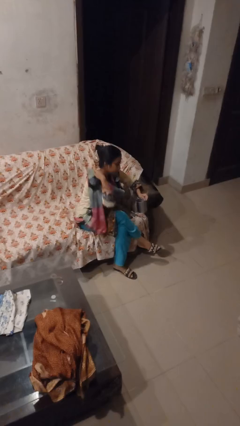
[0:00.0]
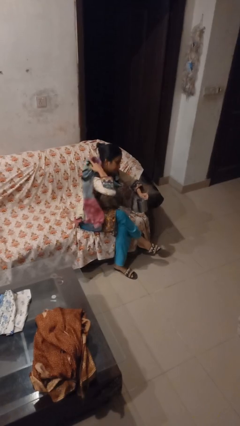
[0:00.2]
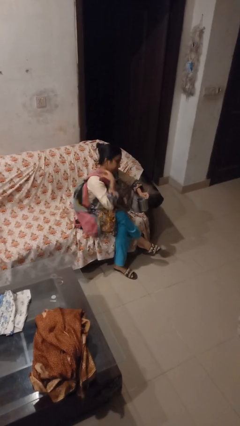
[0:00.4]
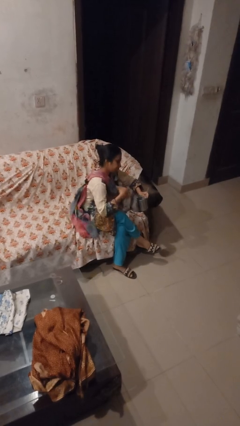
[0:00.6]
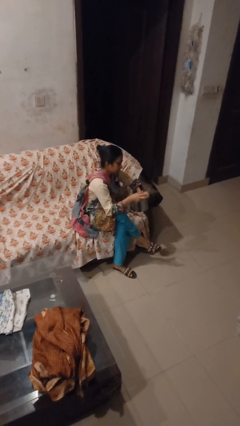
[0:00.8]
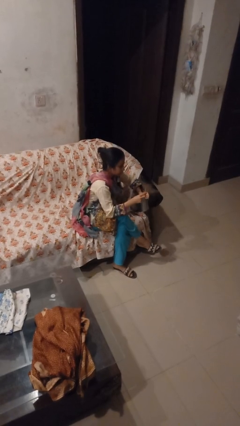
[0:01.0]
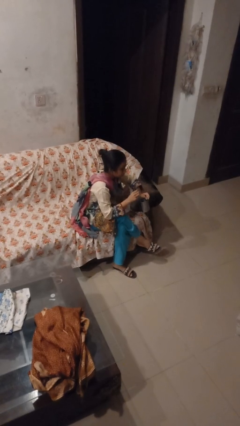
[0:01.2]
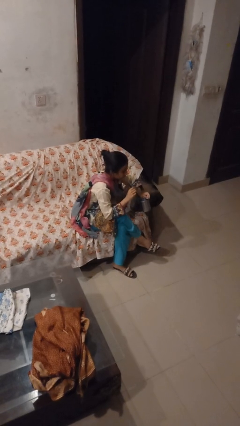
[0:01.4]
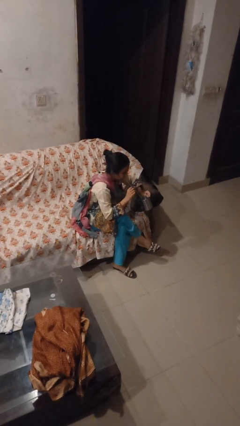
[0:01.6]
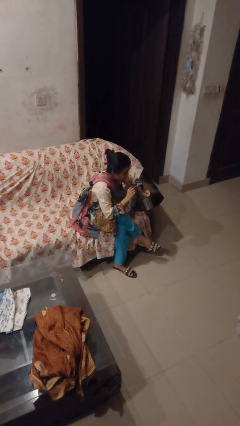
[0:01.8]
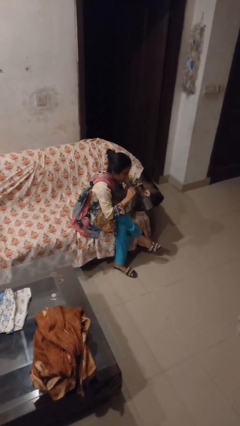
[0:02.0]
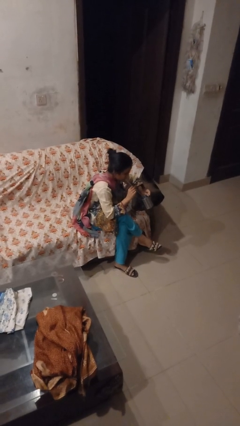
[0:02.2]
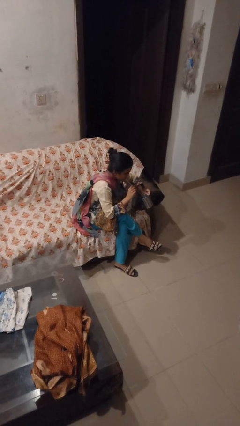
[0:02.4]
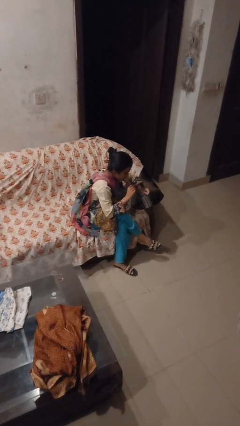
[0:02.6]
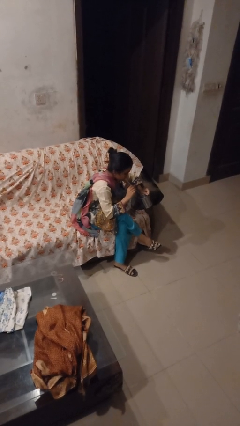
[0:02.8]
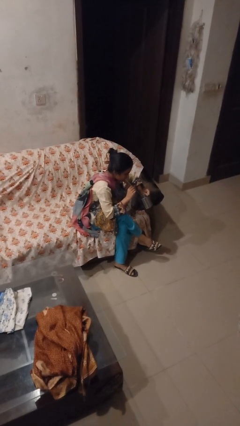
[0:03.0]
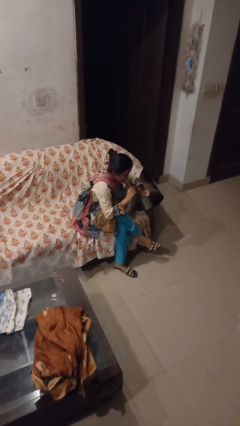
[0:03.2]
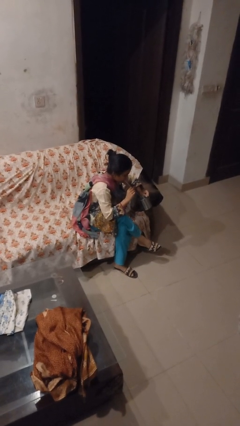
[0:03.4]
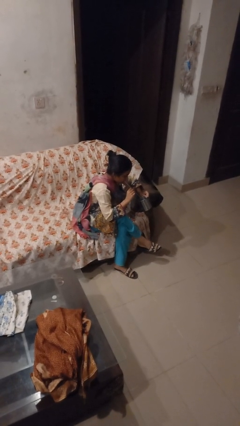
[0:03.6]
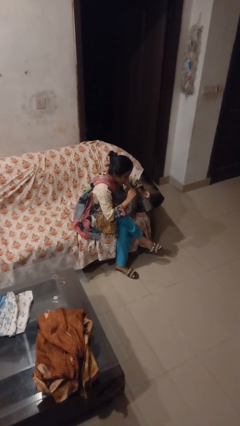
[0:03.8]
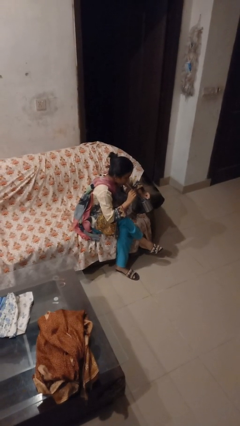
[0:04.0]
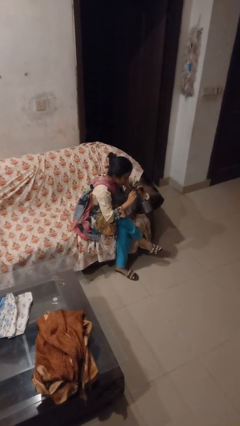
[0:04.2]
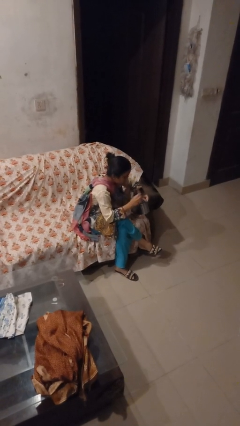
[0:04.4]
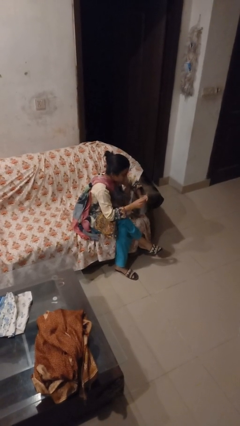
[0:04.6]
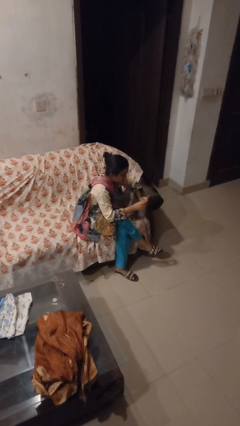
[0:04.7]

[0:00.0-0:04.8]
person drinks from straw

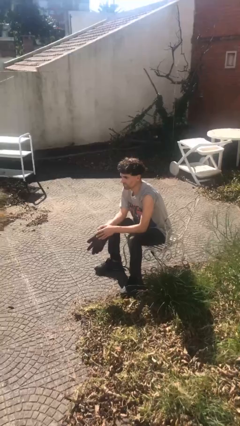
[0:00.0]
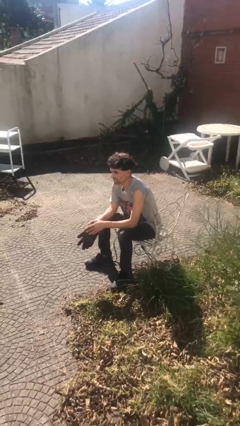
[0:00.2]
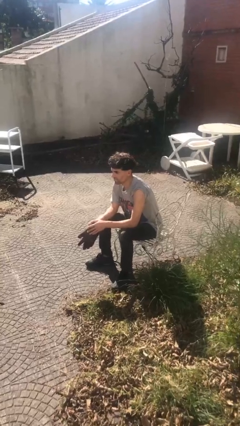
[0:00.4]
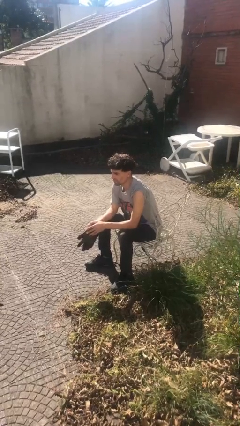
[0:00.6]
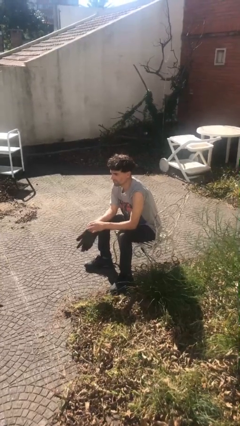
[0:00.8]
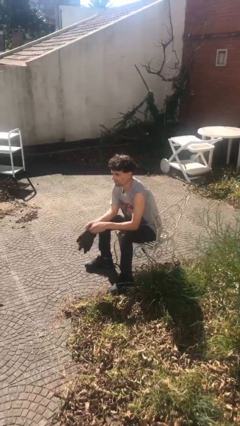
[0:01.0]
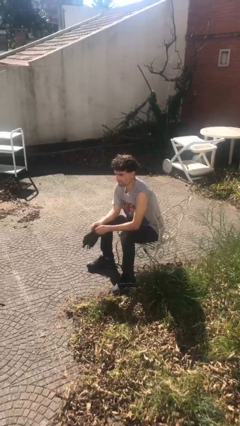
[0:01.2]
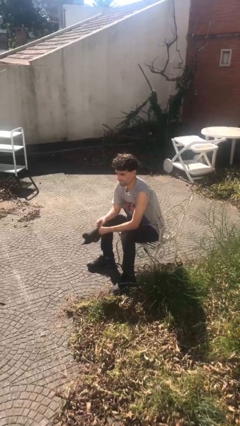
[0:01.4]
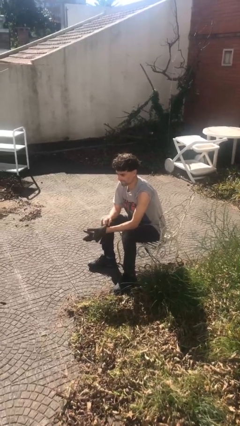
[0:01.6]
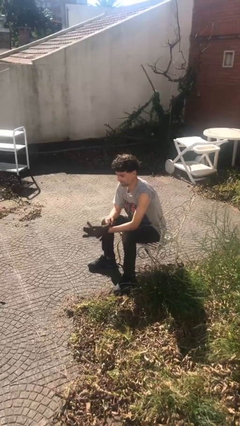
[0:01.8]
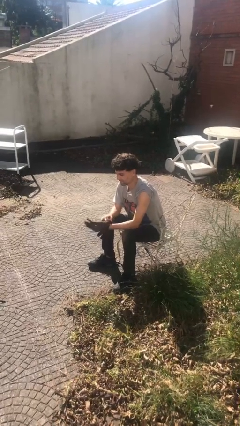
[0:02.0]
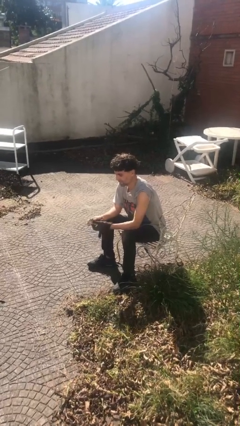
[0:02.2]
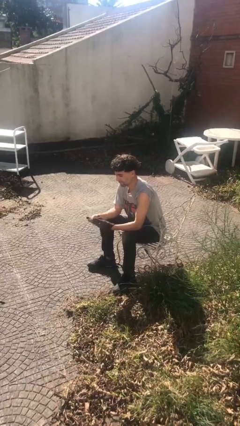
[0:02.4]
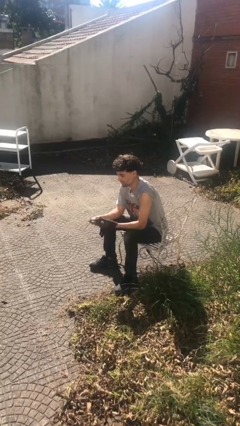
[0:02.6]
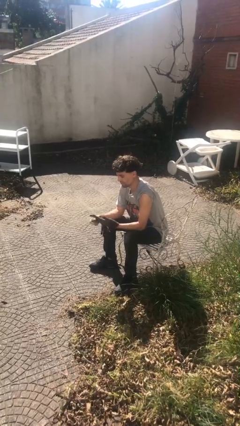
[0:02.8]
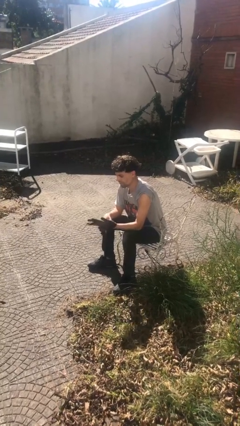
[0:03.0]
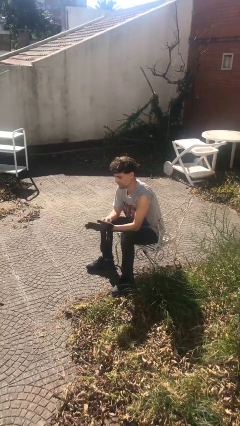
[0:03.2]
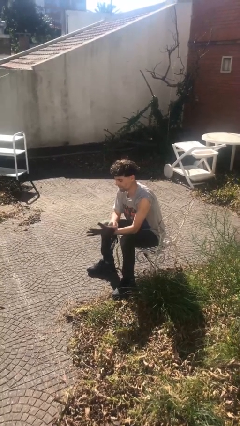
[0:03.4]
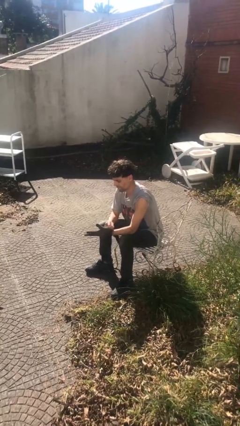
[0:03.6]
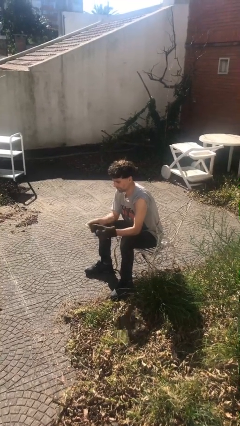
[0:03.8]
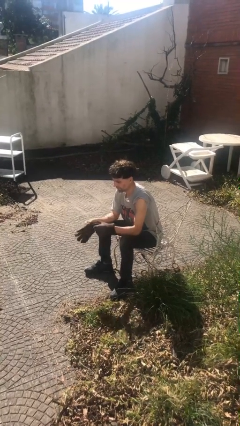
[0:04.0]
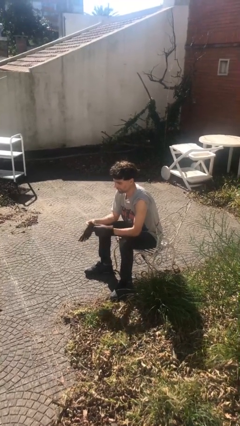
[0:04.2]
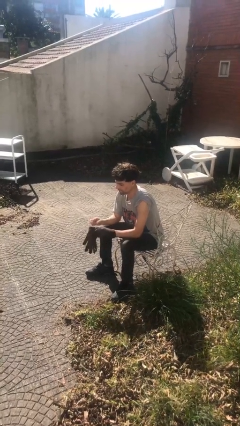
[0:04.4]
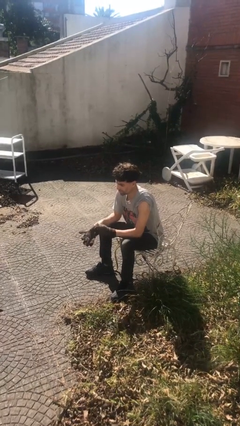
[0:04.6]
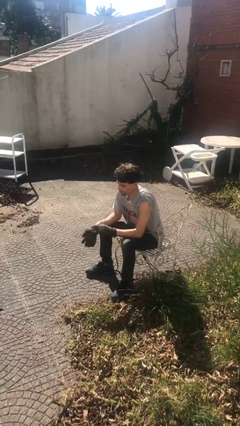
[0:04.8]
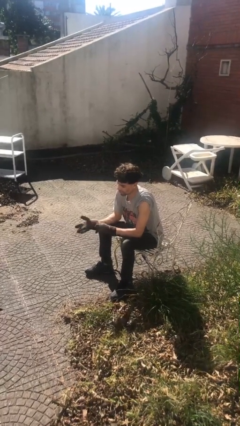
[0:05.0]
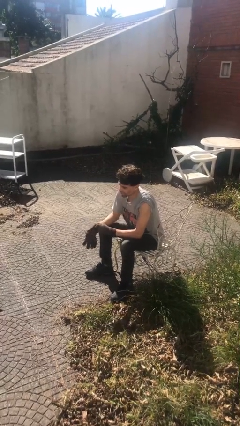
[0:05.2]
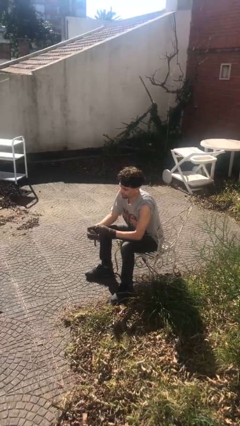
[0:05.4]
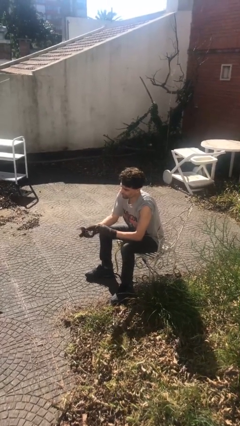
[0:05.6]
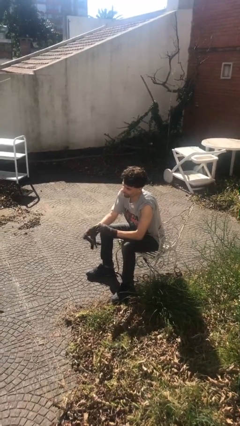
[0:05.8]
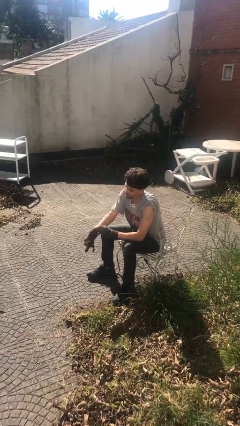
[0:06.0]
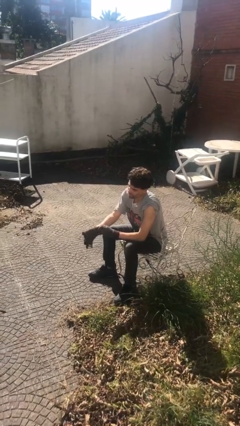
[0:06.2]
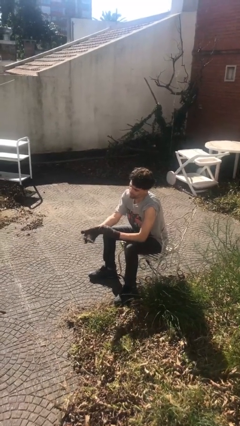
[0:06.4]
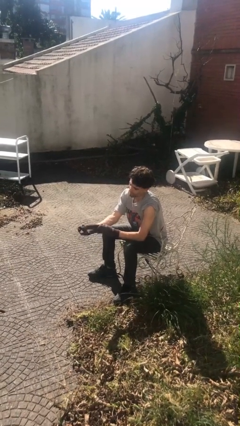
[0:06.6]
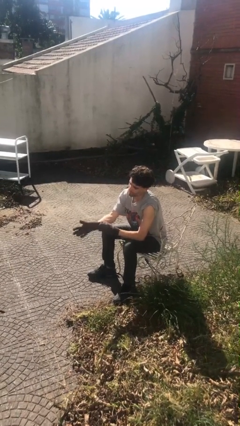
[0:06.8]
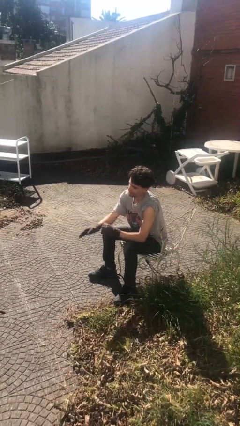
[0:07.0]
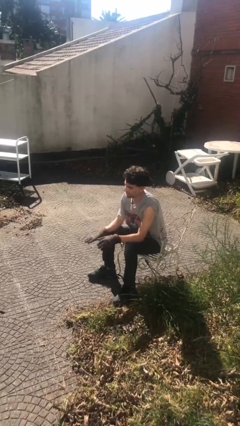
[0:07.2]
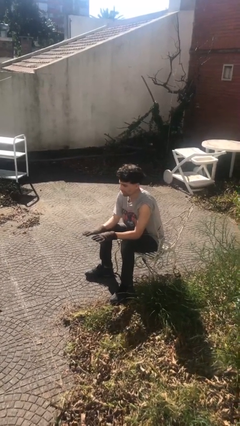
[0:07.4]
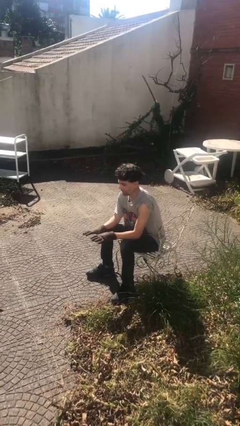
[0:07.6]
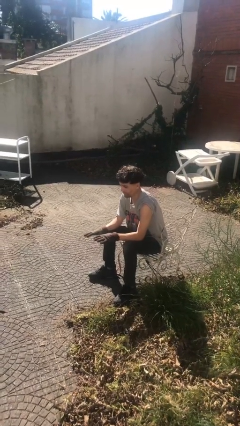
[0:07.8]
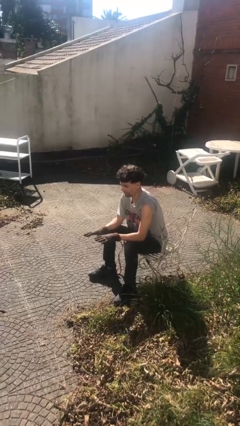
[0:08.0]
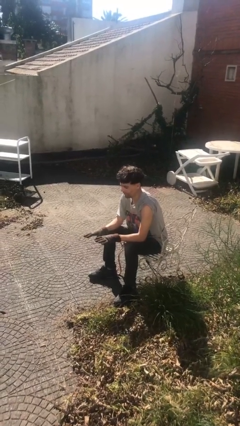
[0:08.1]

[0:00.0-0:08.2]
person puts on gloves

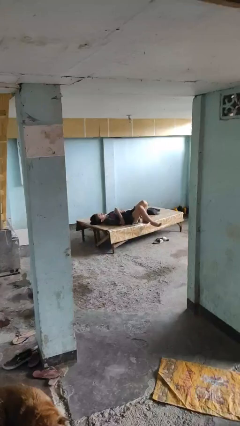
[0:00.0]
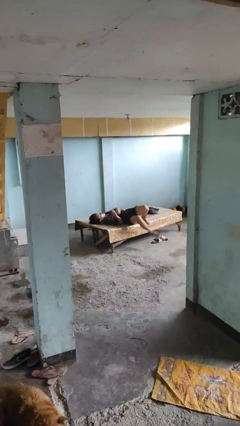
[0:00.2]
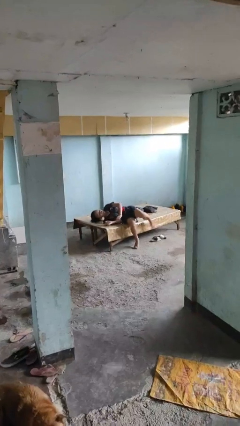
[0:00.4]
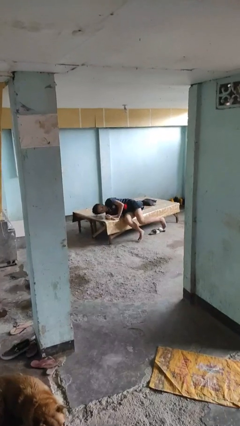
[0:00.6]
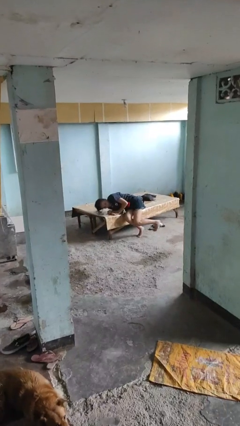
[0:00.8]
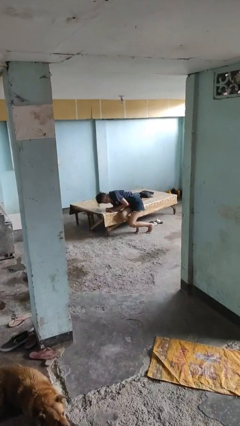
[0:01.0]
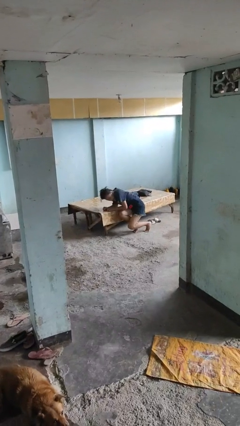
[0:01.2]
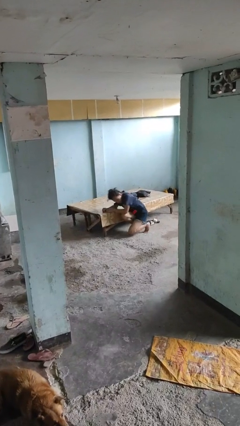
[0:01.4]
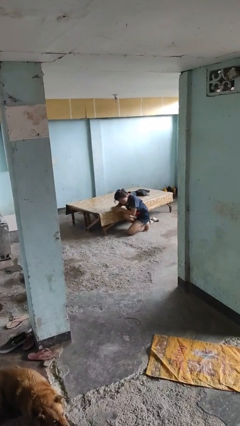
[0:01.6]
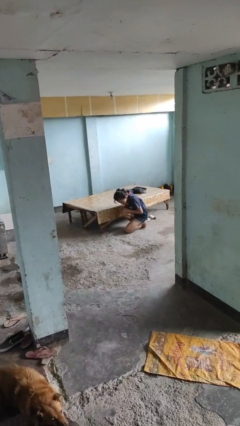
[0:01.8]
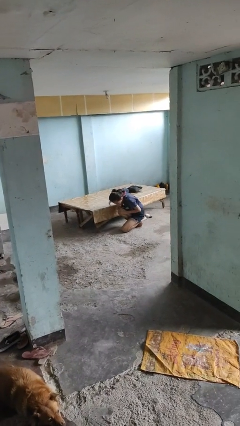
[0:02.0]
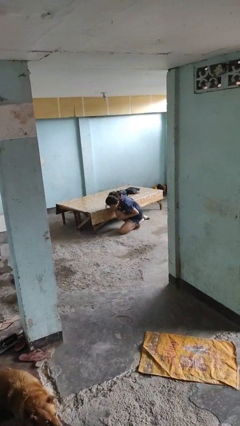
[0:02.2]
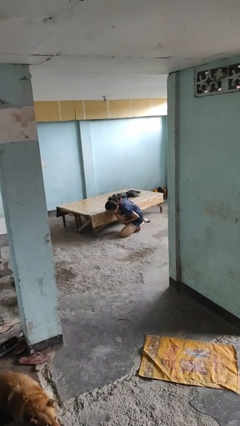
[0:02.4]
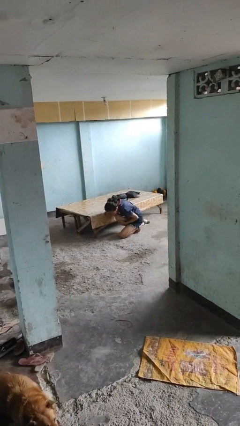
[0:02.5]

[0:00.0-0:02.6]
person falls from bed

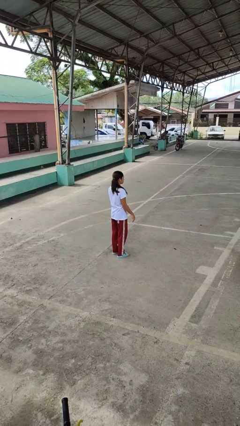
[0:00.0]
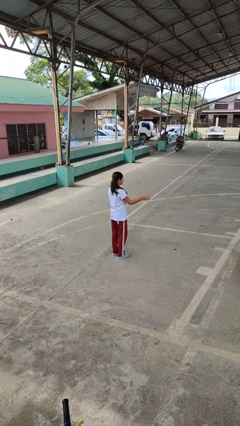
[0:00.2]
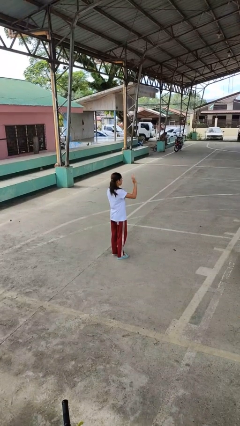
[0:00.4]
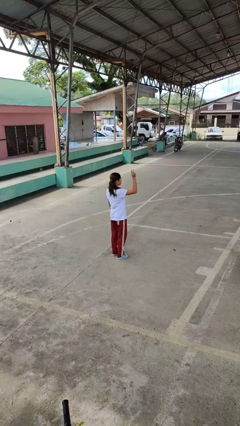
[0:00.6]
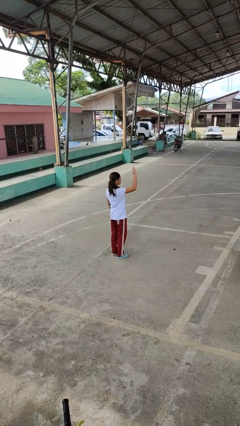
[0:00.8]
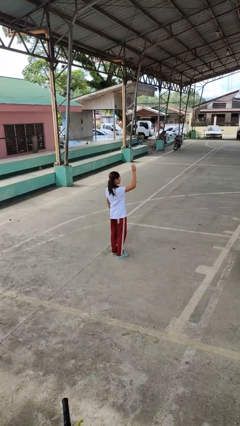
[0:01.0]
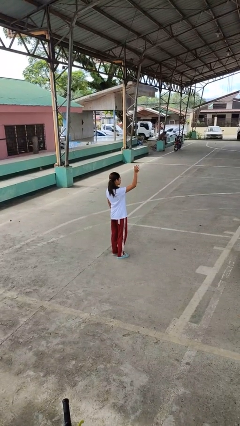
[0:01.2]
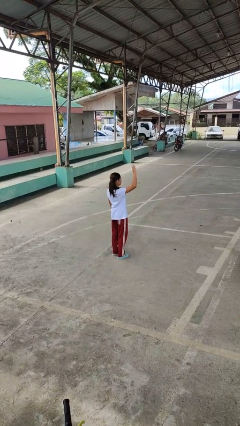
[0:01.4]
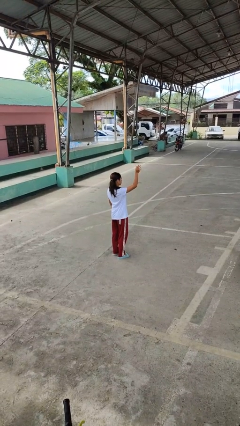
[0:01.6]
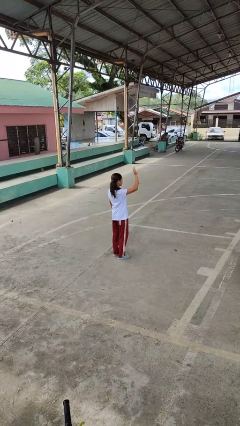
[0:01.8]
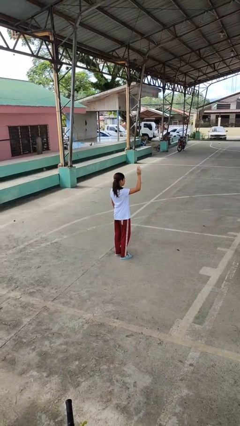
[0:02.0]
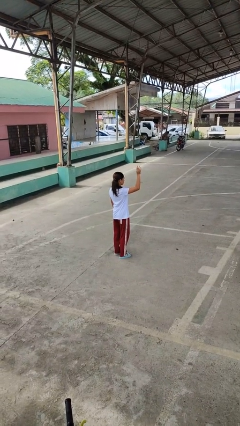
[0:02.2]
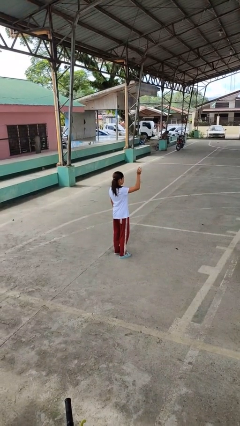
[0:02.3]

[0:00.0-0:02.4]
person waves at person
